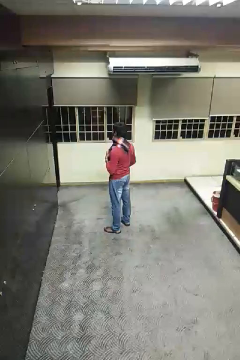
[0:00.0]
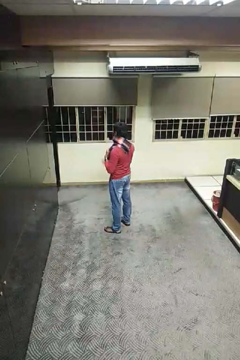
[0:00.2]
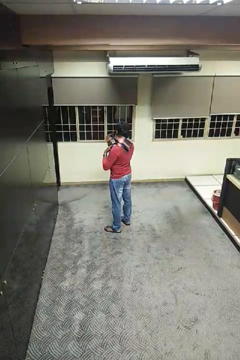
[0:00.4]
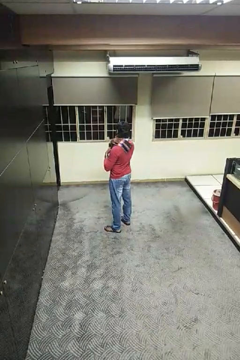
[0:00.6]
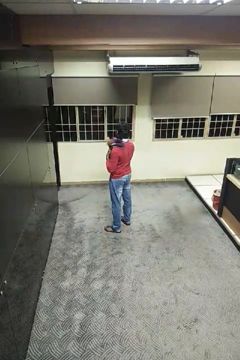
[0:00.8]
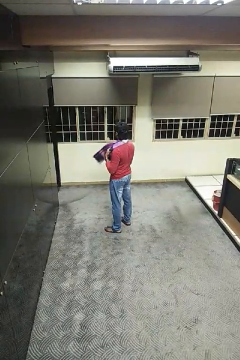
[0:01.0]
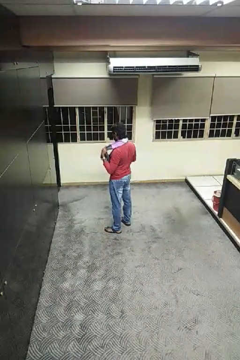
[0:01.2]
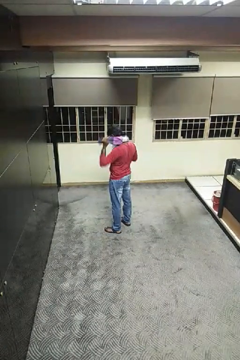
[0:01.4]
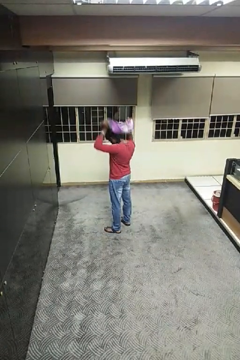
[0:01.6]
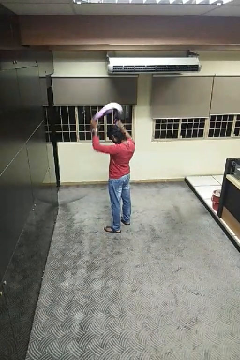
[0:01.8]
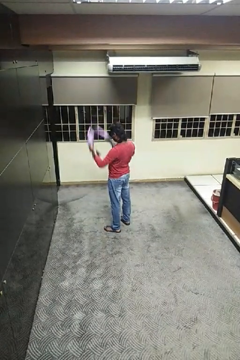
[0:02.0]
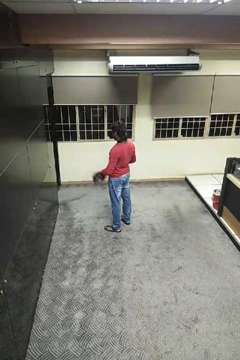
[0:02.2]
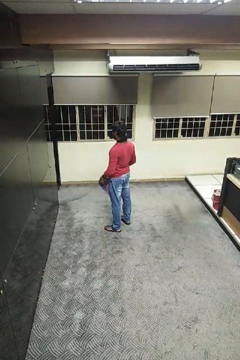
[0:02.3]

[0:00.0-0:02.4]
person takes off scarf

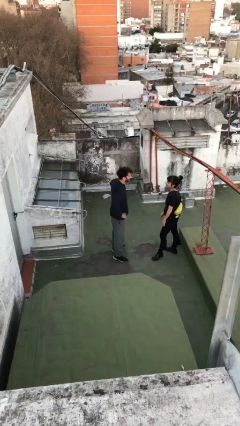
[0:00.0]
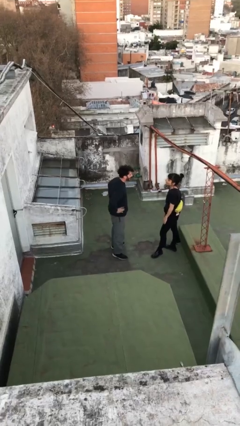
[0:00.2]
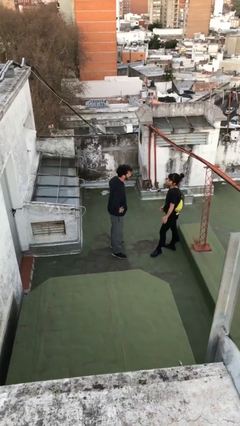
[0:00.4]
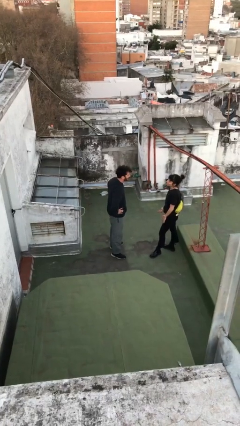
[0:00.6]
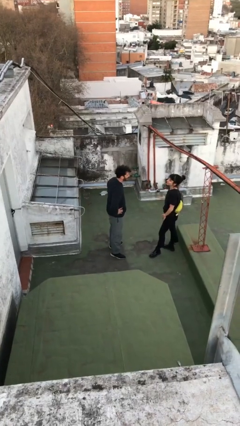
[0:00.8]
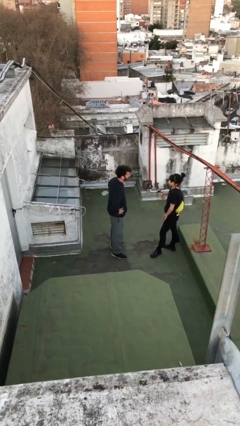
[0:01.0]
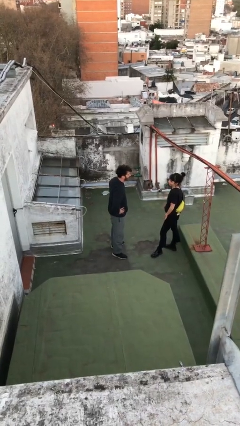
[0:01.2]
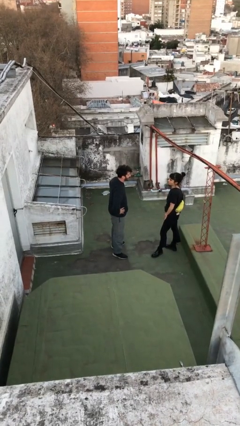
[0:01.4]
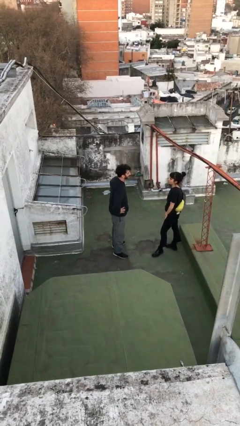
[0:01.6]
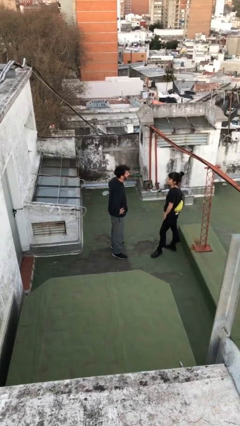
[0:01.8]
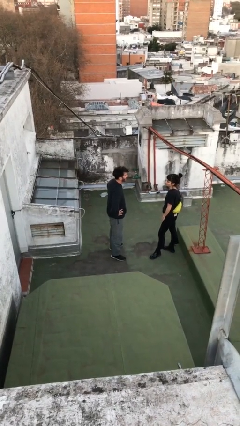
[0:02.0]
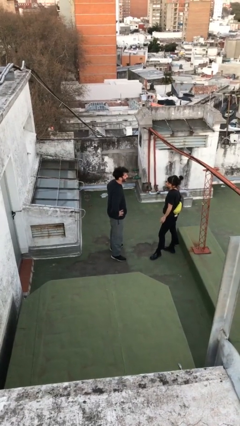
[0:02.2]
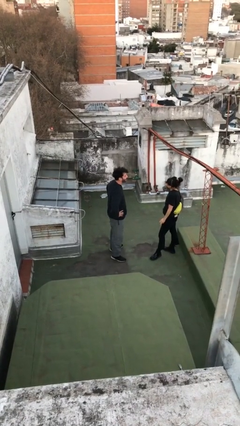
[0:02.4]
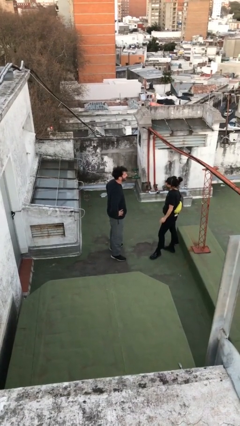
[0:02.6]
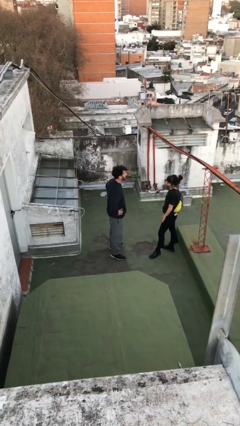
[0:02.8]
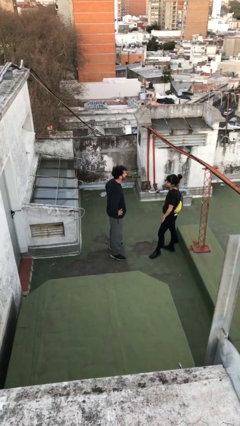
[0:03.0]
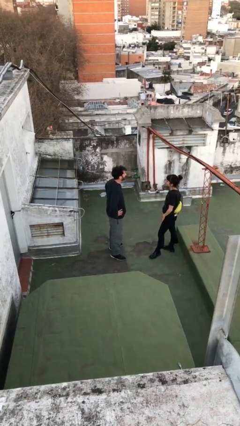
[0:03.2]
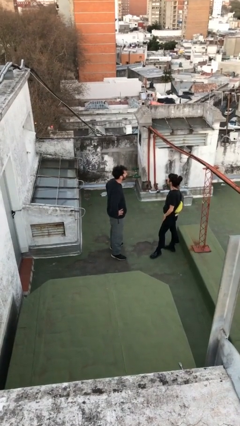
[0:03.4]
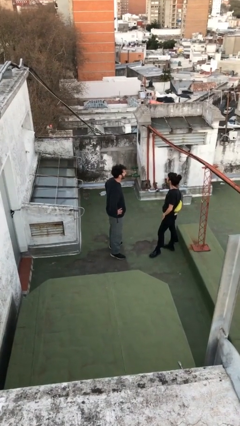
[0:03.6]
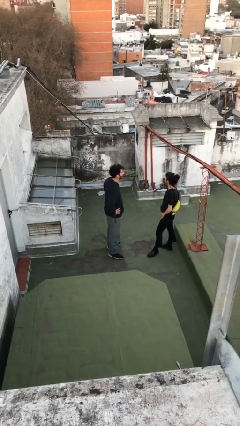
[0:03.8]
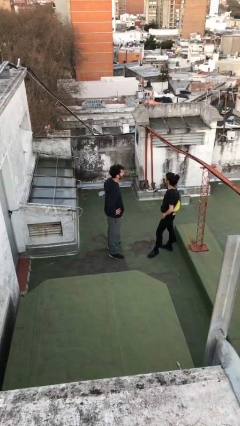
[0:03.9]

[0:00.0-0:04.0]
person talks to person

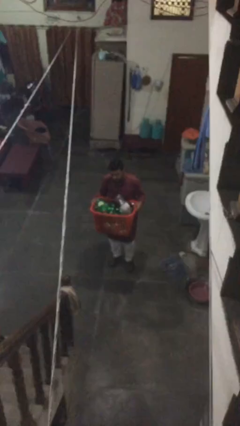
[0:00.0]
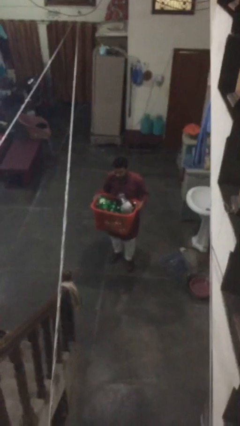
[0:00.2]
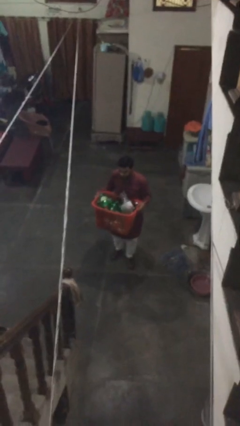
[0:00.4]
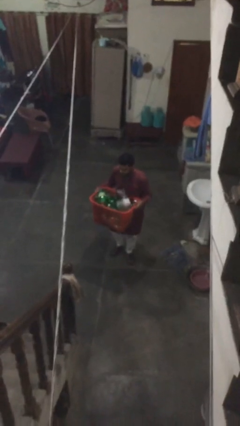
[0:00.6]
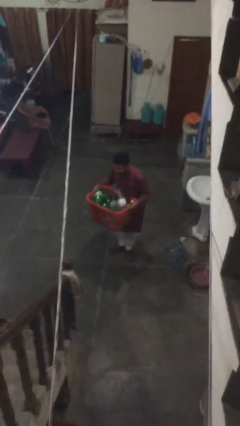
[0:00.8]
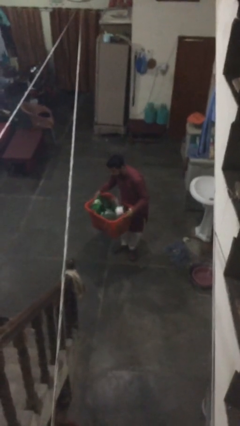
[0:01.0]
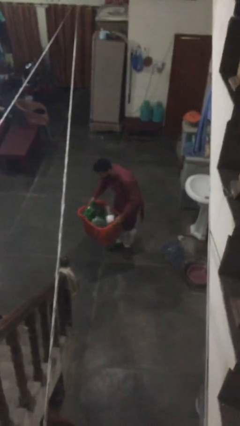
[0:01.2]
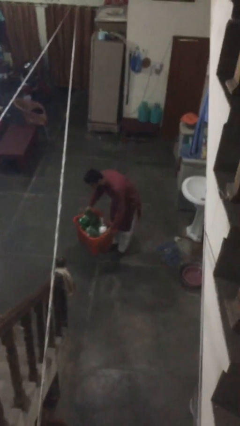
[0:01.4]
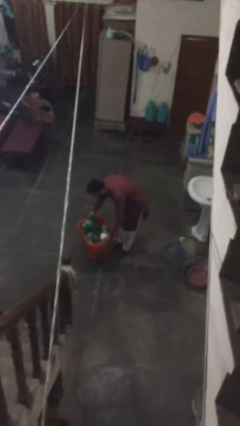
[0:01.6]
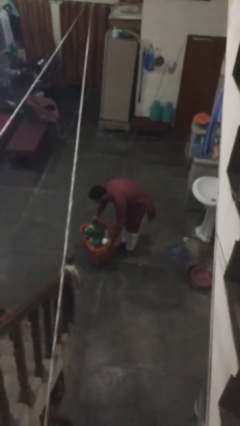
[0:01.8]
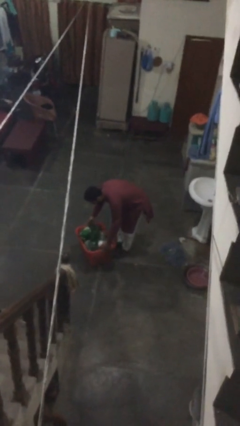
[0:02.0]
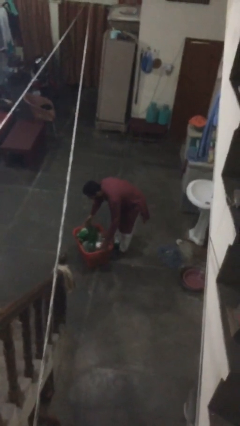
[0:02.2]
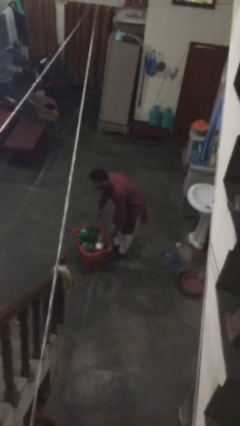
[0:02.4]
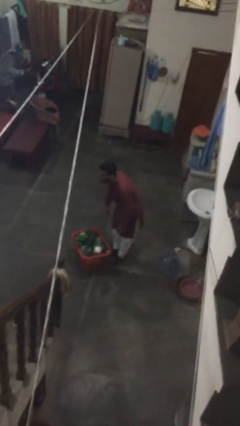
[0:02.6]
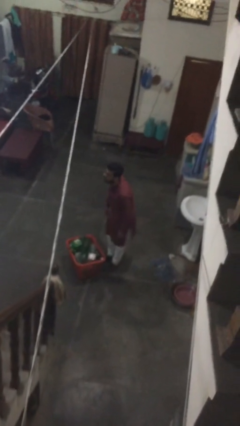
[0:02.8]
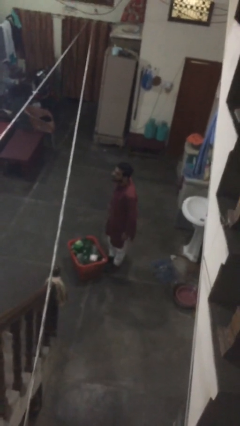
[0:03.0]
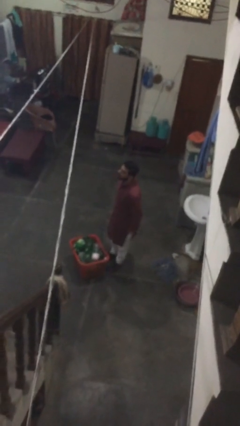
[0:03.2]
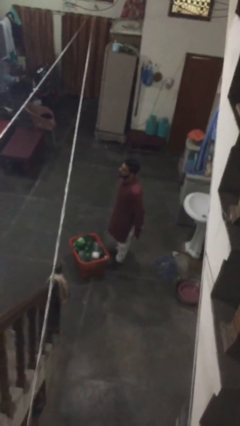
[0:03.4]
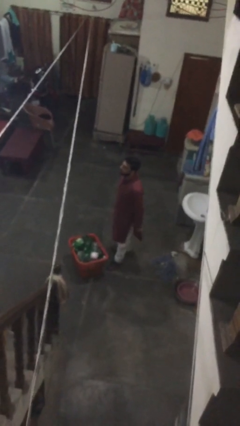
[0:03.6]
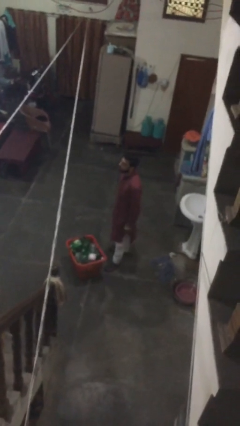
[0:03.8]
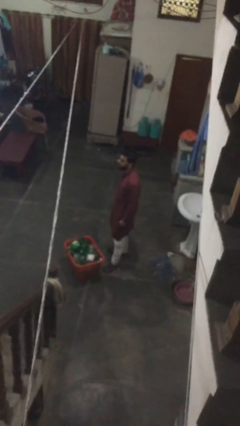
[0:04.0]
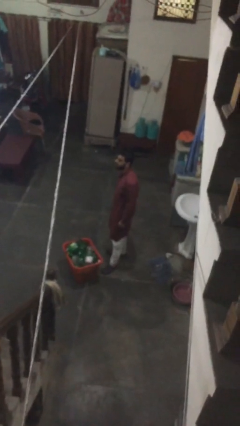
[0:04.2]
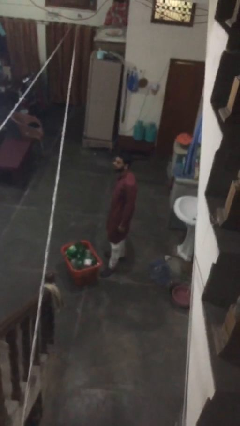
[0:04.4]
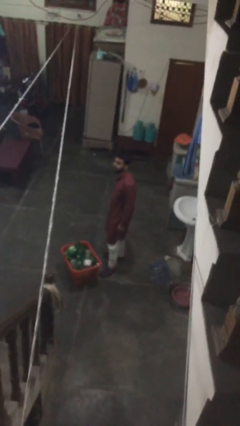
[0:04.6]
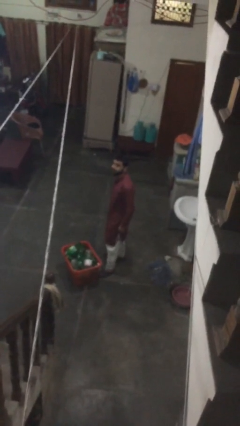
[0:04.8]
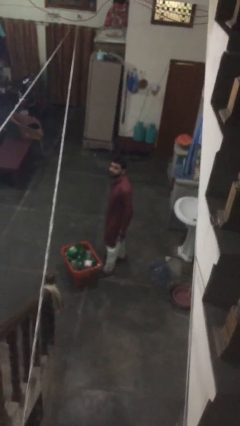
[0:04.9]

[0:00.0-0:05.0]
person puts down object on floor

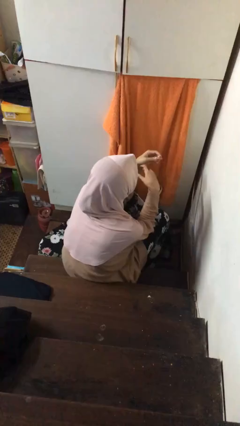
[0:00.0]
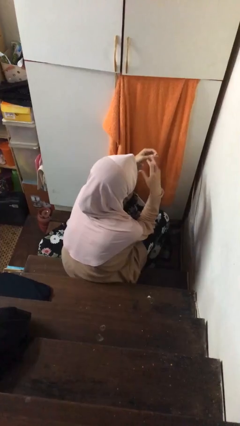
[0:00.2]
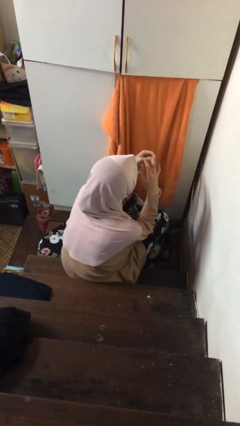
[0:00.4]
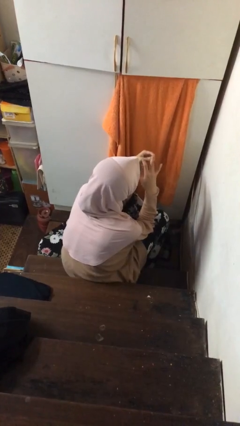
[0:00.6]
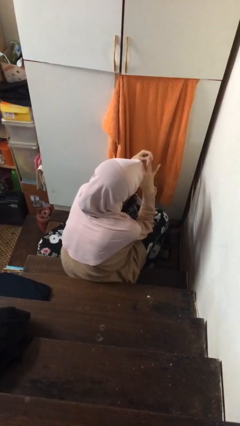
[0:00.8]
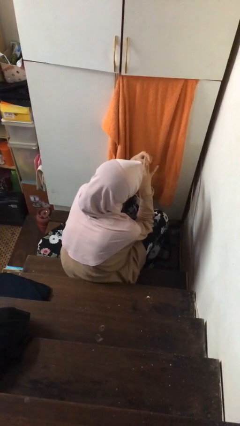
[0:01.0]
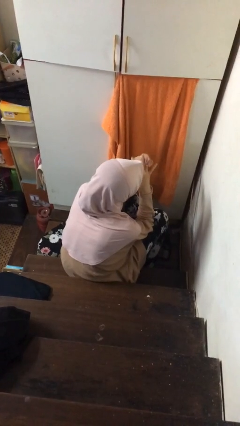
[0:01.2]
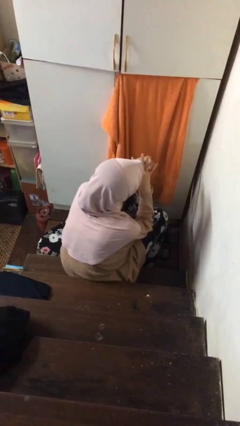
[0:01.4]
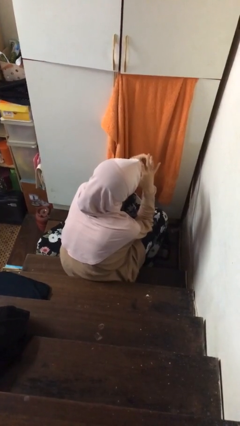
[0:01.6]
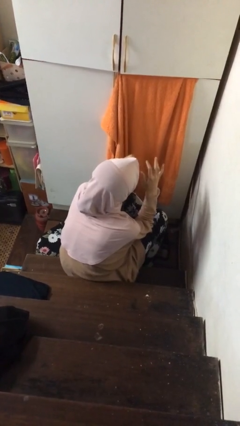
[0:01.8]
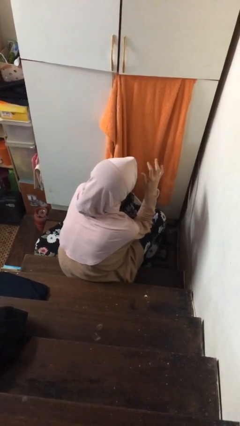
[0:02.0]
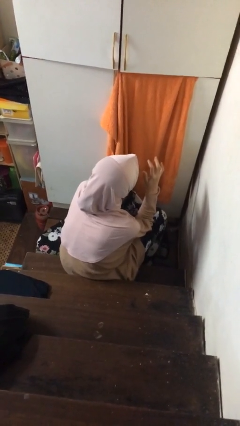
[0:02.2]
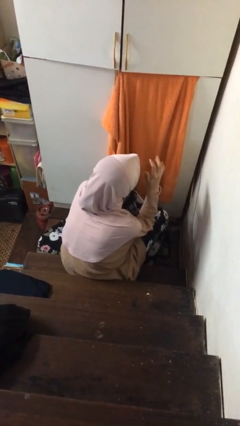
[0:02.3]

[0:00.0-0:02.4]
person puts on ring

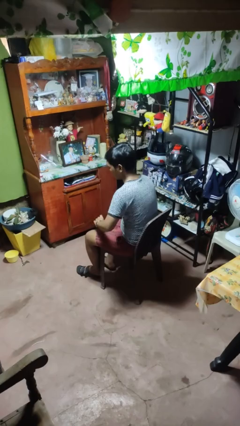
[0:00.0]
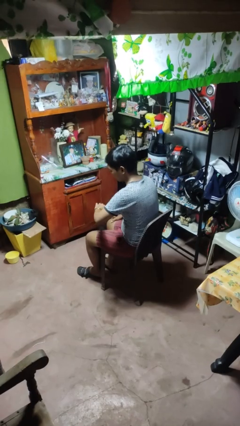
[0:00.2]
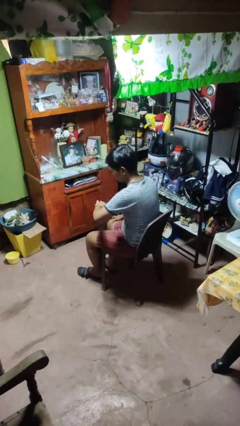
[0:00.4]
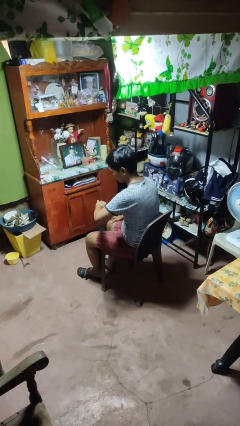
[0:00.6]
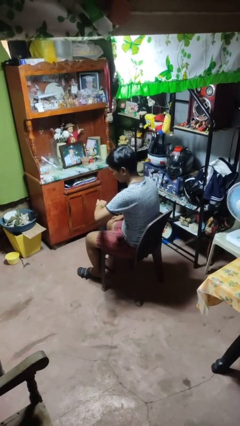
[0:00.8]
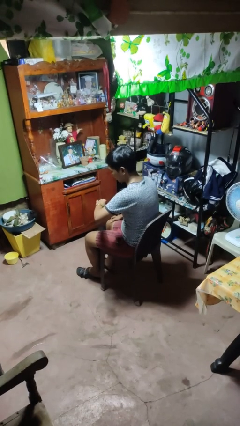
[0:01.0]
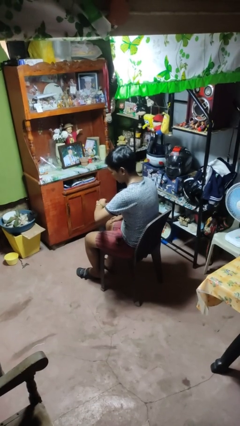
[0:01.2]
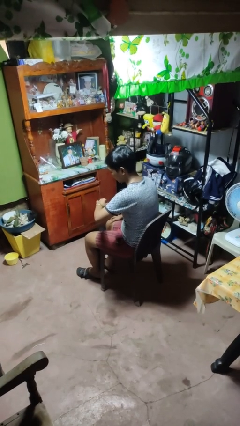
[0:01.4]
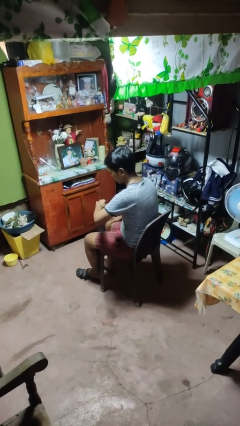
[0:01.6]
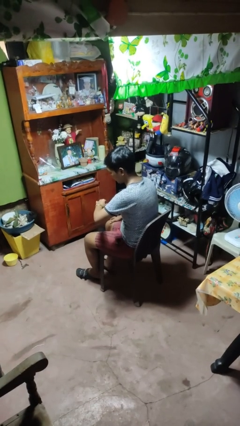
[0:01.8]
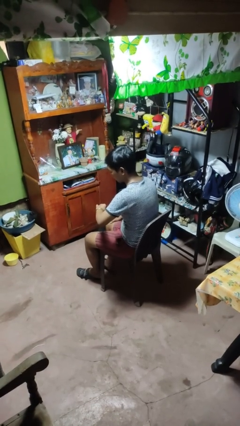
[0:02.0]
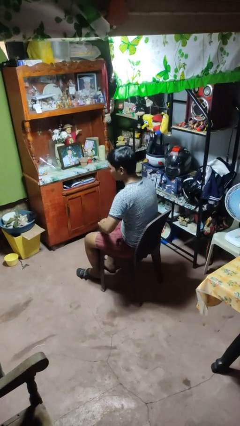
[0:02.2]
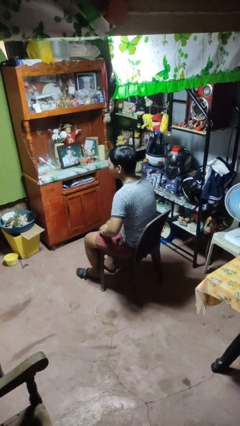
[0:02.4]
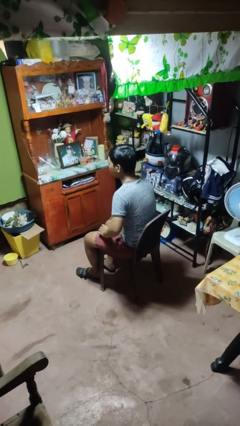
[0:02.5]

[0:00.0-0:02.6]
person looks at wristwatch

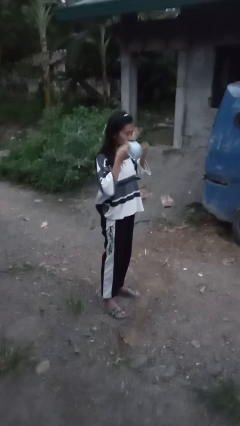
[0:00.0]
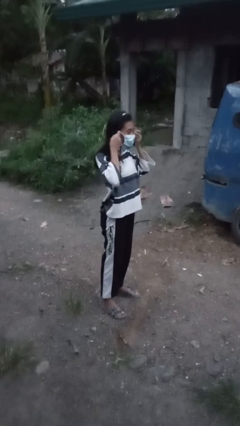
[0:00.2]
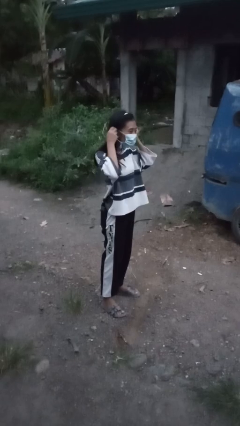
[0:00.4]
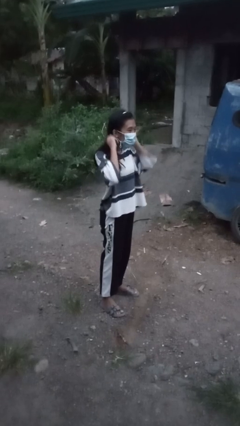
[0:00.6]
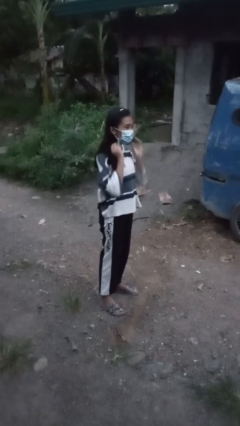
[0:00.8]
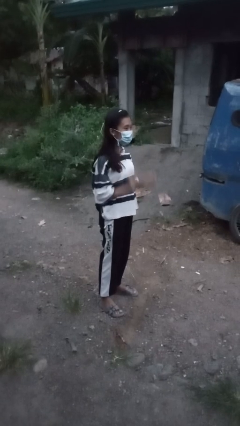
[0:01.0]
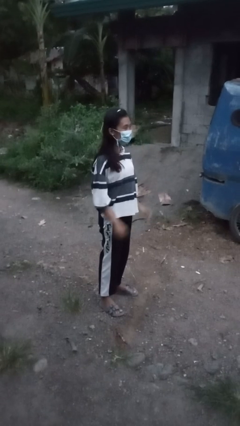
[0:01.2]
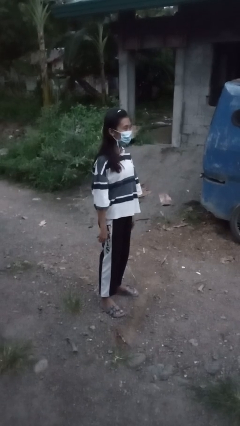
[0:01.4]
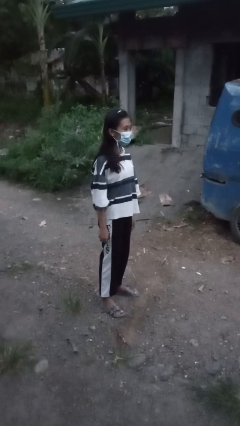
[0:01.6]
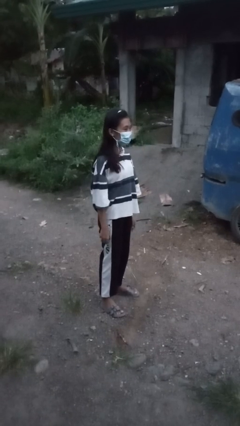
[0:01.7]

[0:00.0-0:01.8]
person puts on facemask
